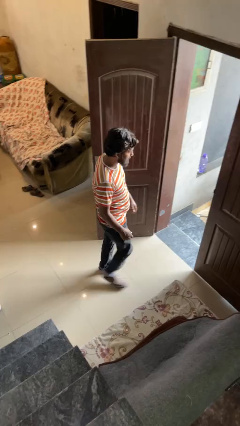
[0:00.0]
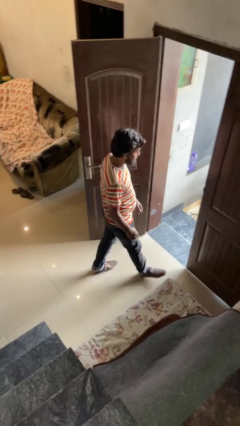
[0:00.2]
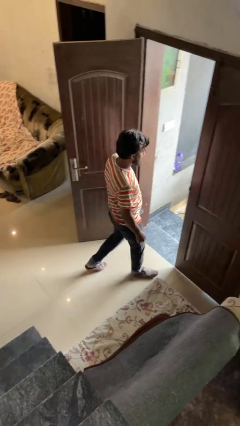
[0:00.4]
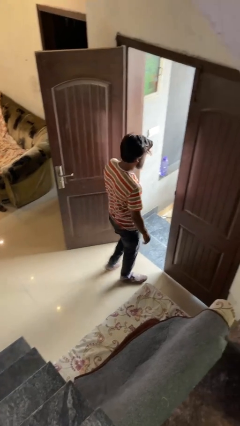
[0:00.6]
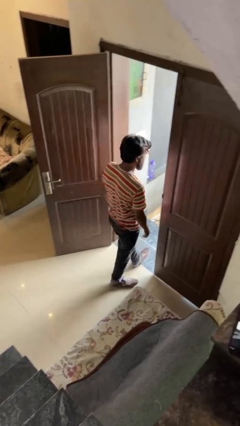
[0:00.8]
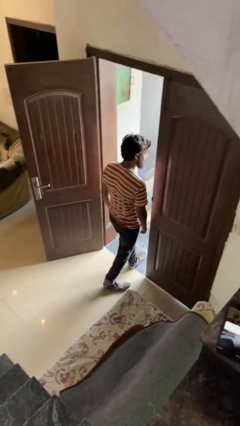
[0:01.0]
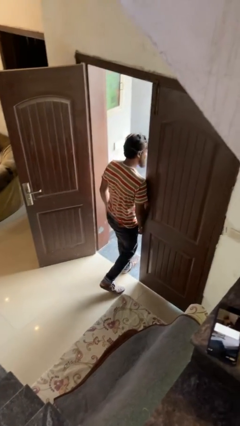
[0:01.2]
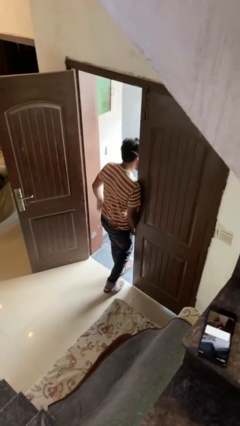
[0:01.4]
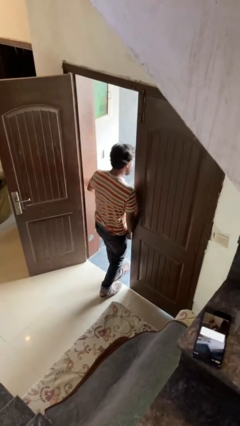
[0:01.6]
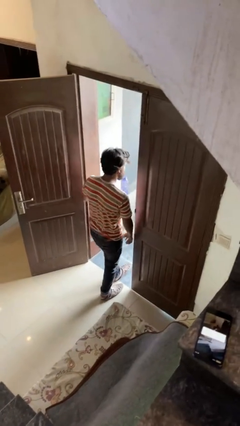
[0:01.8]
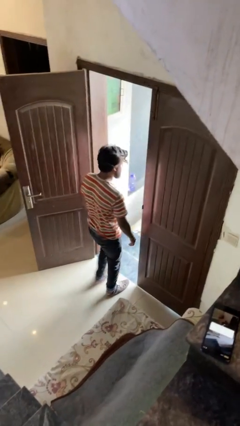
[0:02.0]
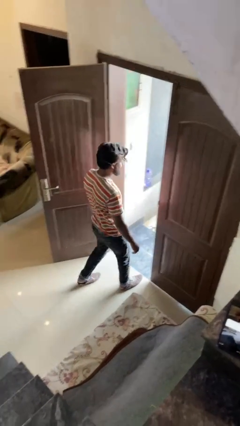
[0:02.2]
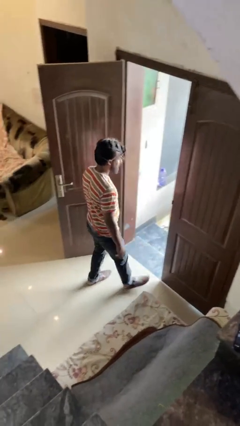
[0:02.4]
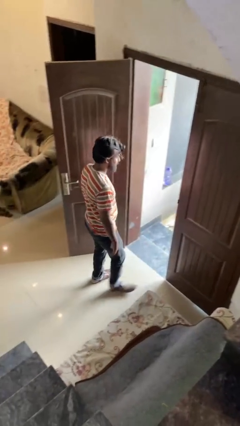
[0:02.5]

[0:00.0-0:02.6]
person bumps into wall

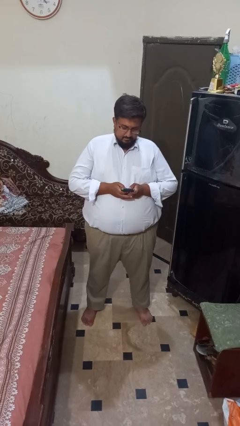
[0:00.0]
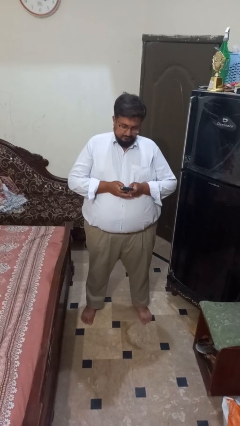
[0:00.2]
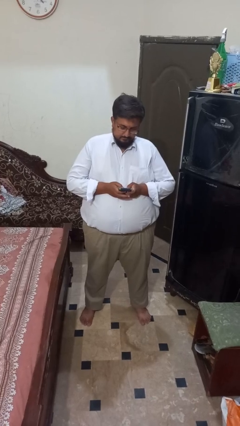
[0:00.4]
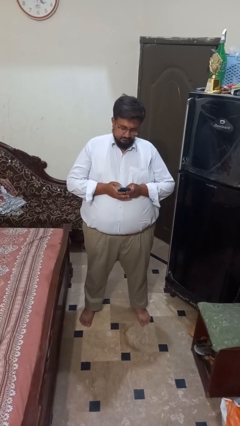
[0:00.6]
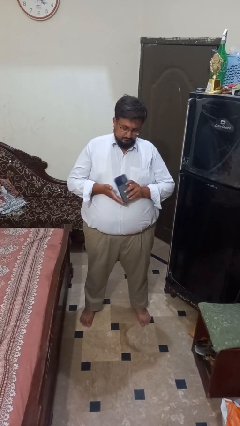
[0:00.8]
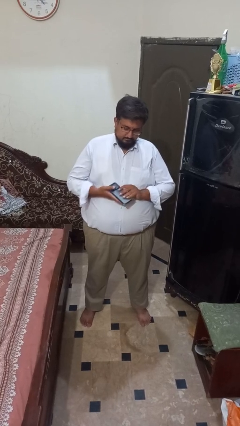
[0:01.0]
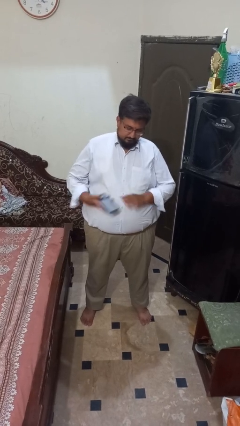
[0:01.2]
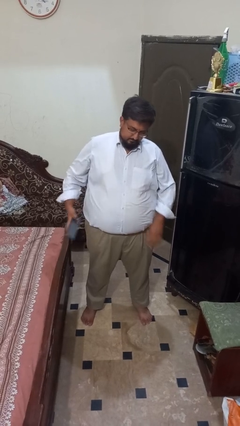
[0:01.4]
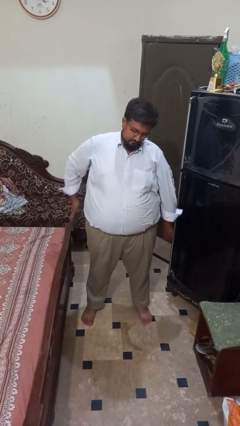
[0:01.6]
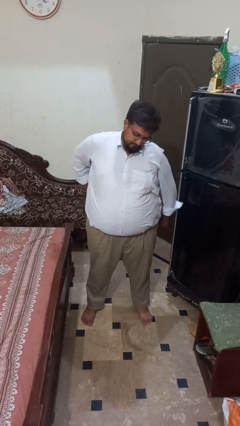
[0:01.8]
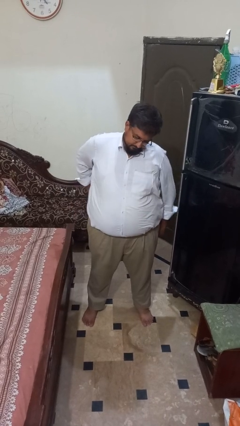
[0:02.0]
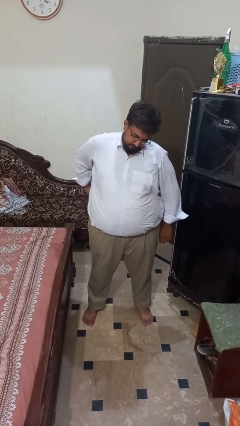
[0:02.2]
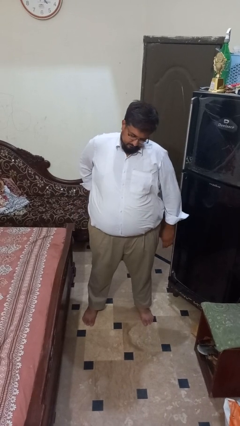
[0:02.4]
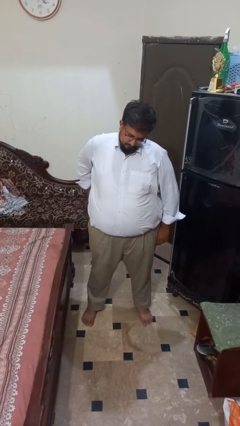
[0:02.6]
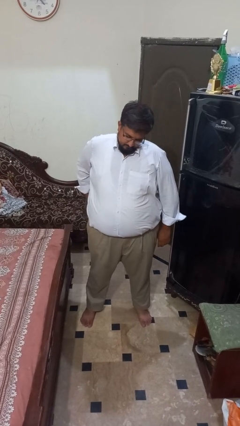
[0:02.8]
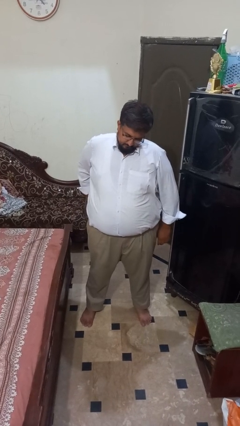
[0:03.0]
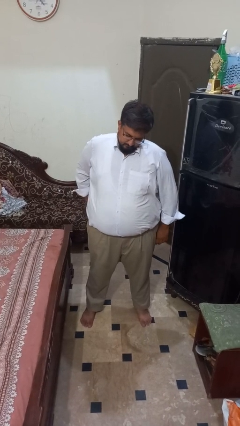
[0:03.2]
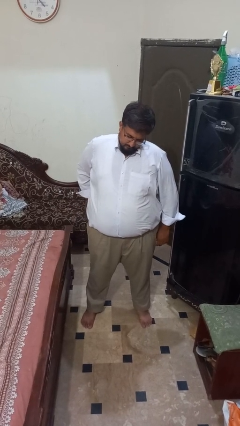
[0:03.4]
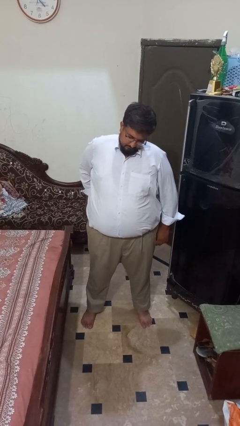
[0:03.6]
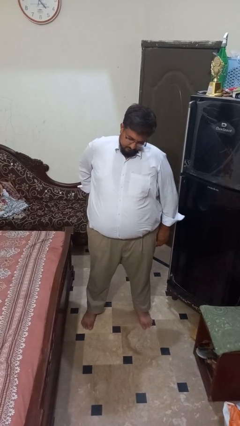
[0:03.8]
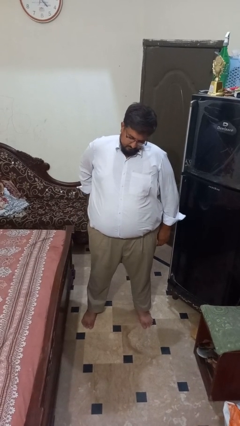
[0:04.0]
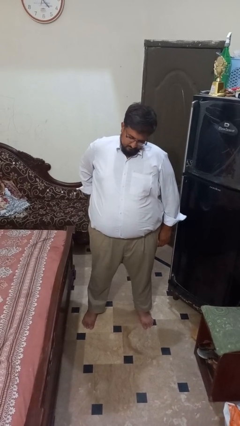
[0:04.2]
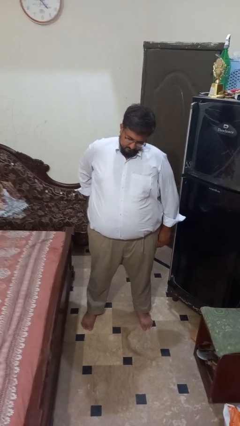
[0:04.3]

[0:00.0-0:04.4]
person puts phone into pocket

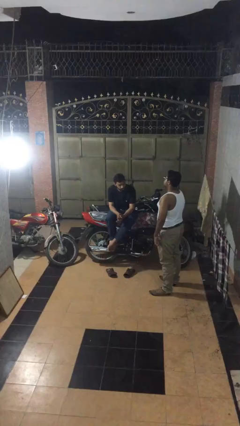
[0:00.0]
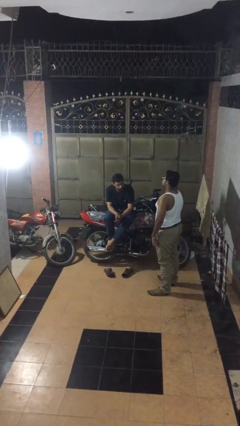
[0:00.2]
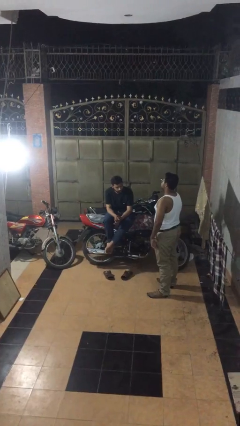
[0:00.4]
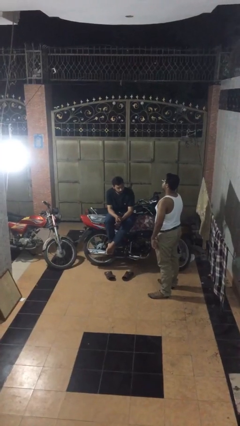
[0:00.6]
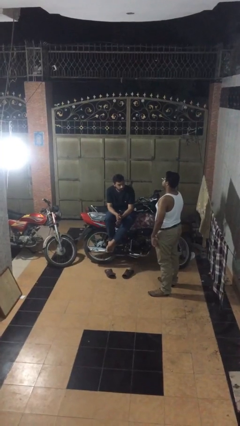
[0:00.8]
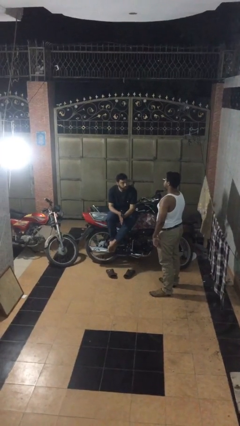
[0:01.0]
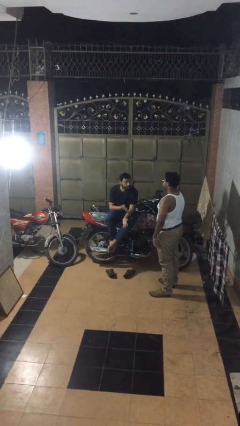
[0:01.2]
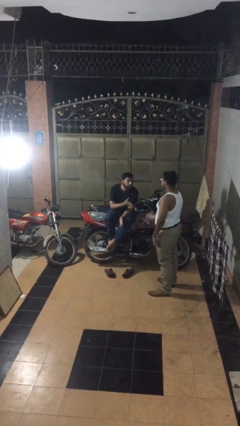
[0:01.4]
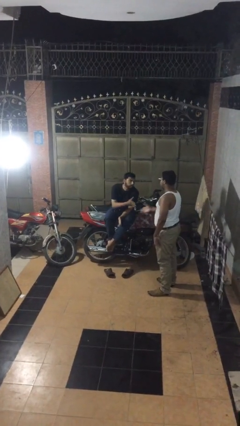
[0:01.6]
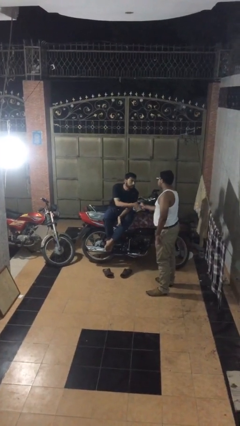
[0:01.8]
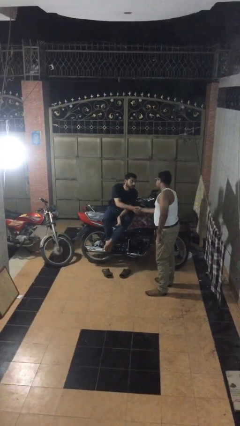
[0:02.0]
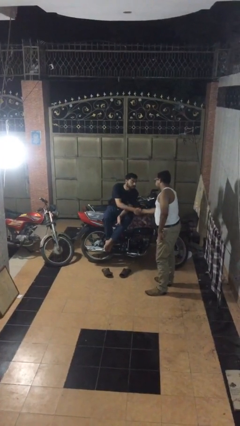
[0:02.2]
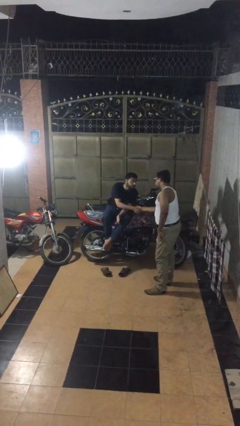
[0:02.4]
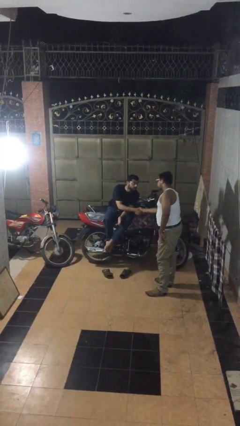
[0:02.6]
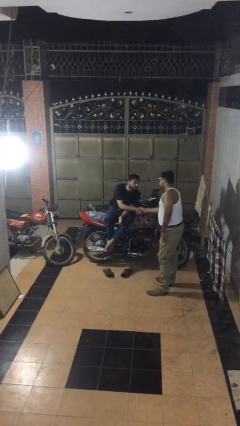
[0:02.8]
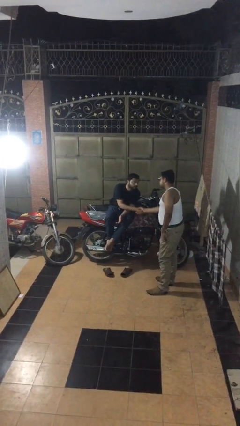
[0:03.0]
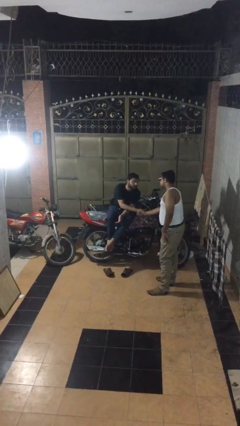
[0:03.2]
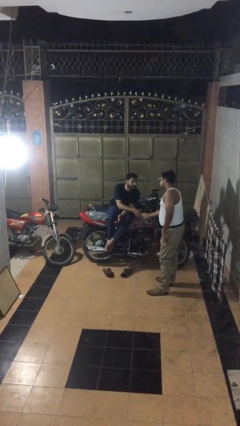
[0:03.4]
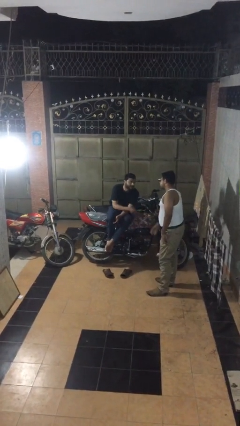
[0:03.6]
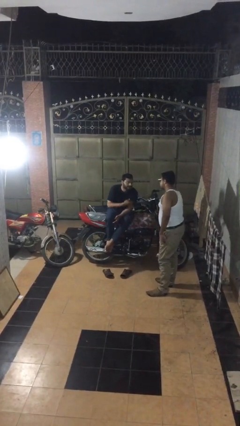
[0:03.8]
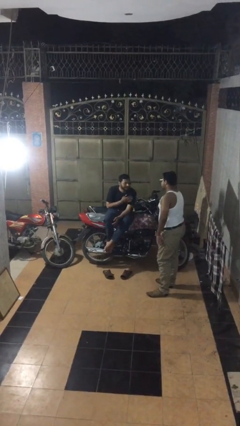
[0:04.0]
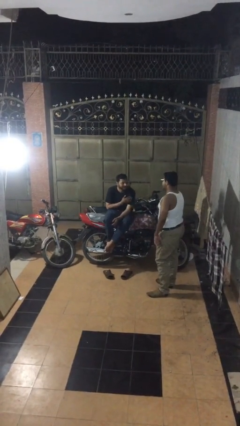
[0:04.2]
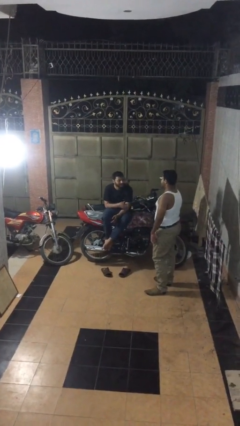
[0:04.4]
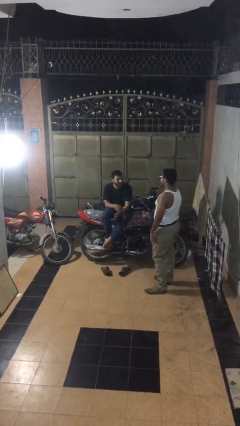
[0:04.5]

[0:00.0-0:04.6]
person shakes hand

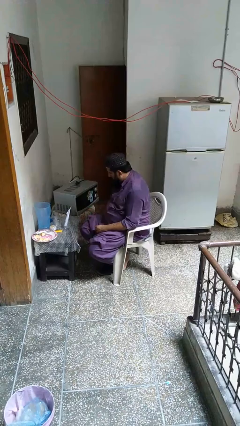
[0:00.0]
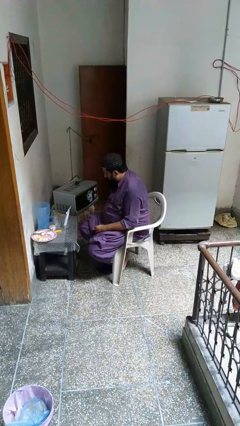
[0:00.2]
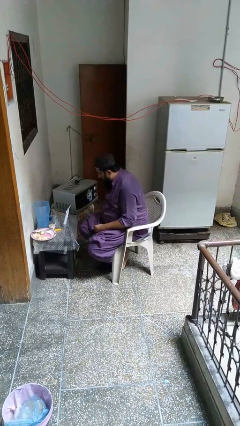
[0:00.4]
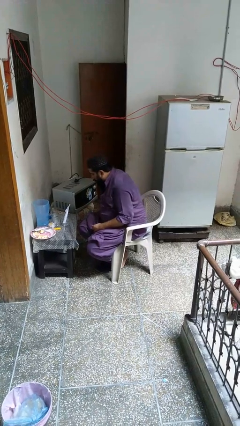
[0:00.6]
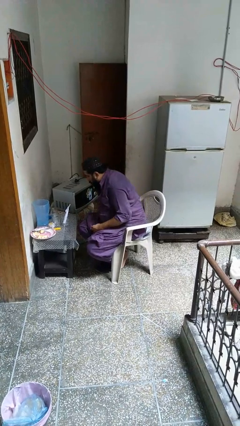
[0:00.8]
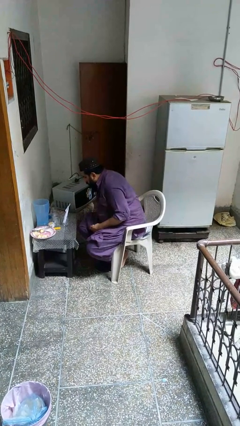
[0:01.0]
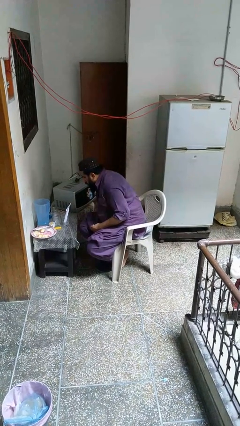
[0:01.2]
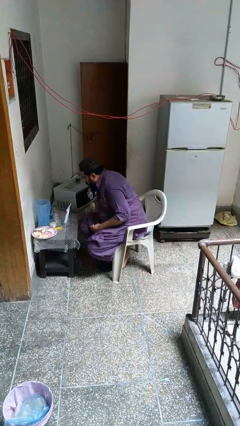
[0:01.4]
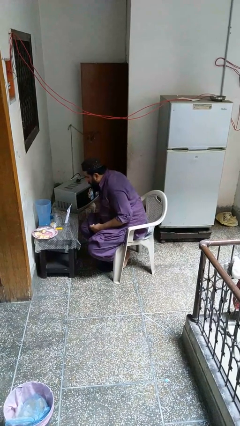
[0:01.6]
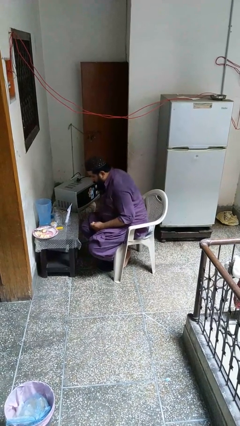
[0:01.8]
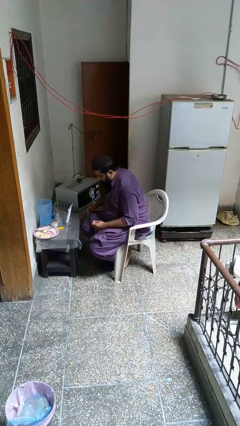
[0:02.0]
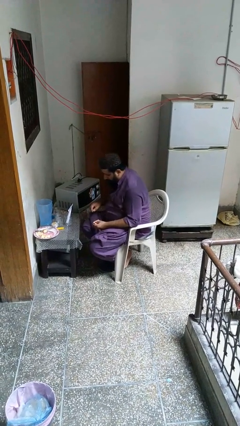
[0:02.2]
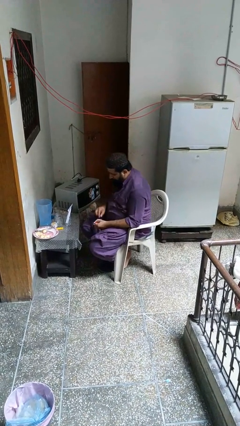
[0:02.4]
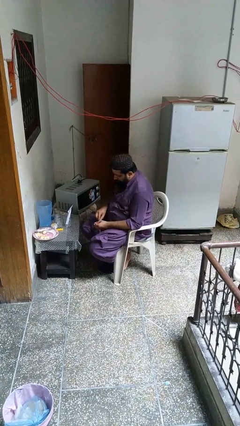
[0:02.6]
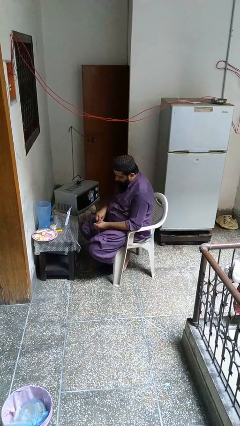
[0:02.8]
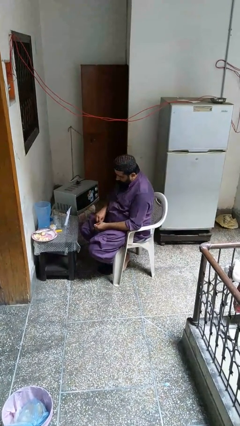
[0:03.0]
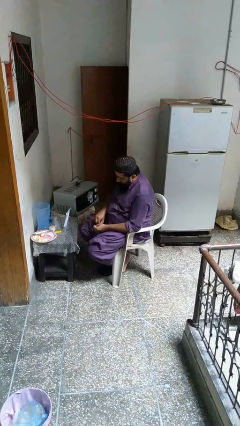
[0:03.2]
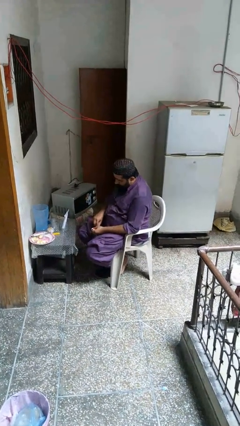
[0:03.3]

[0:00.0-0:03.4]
person extinguishes candle

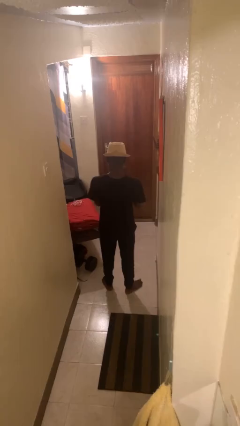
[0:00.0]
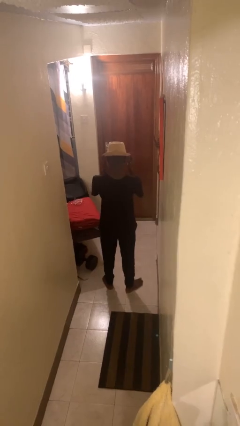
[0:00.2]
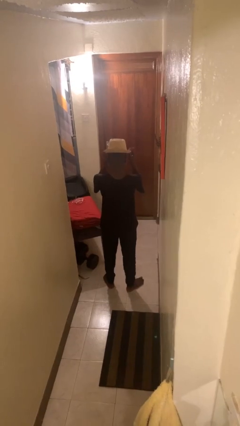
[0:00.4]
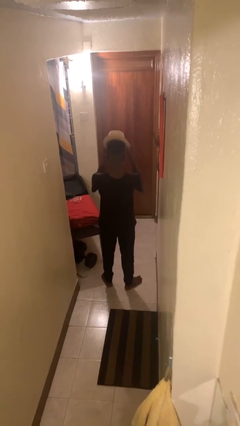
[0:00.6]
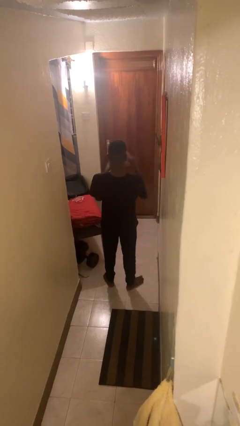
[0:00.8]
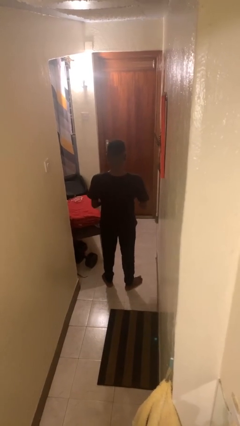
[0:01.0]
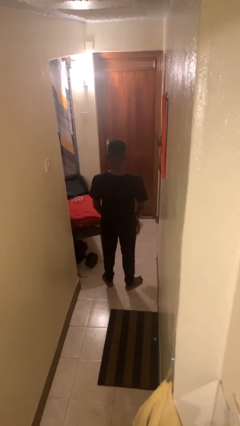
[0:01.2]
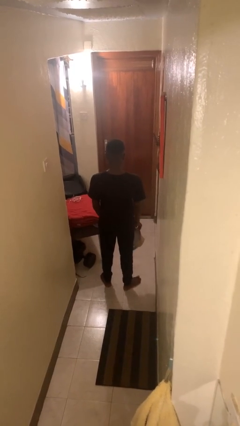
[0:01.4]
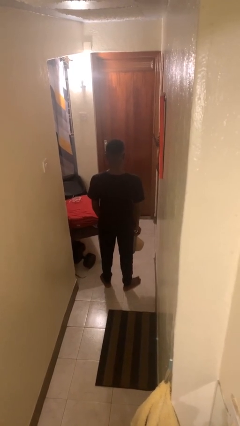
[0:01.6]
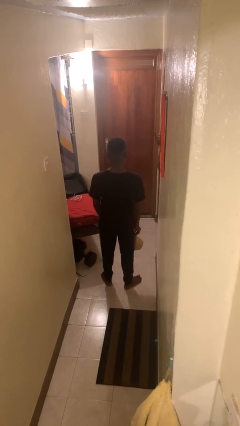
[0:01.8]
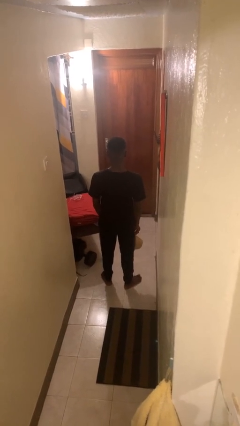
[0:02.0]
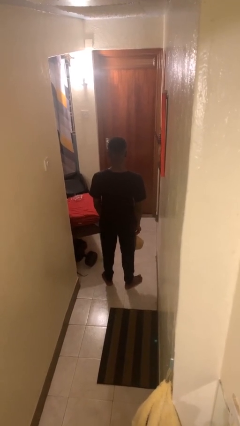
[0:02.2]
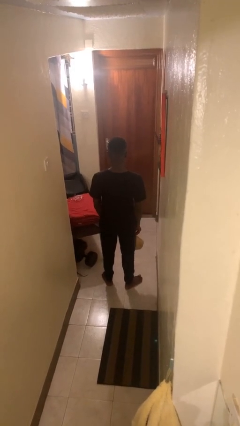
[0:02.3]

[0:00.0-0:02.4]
person takes off hat
